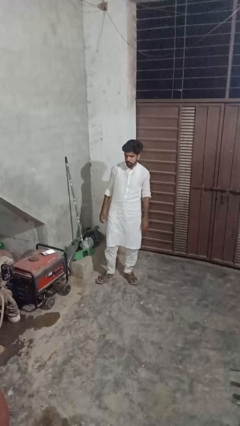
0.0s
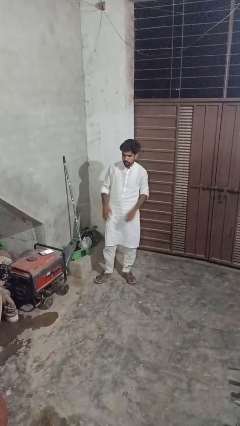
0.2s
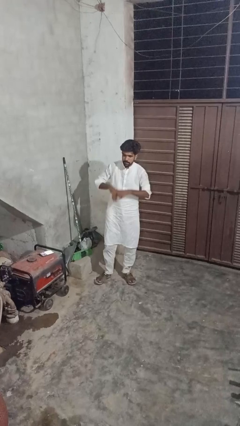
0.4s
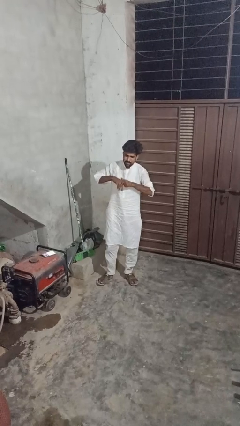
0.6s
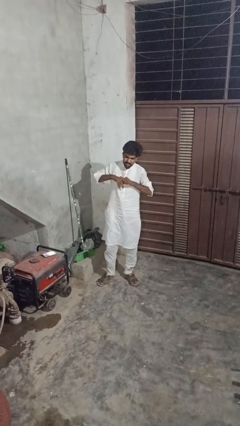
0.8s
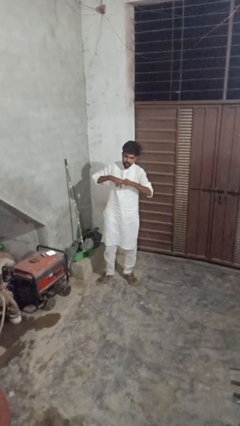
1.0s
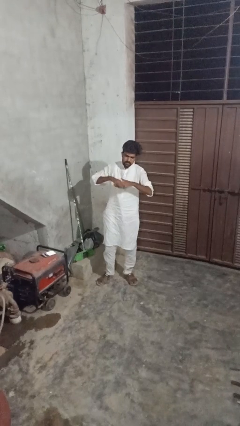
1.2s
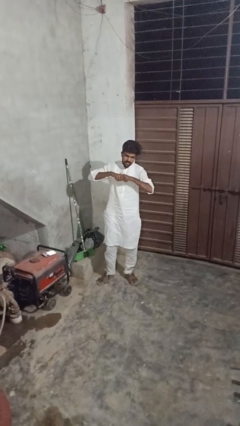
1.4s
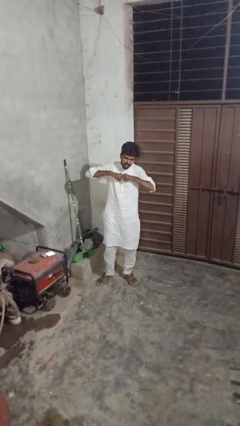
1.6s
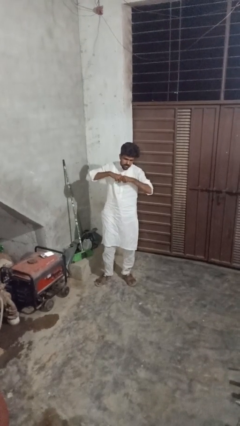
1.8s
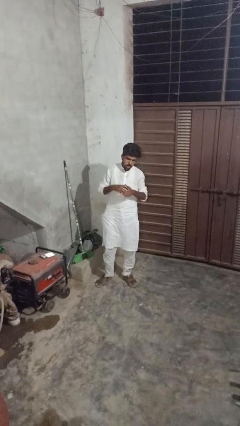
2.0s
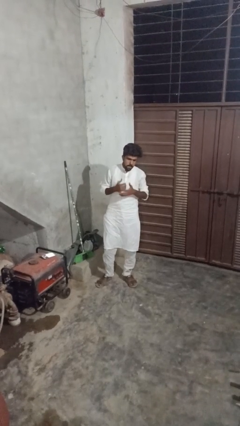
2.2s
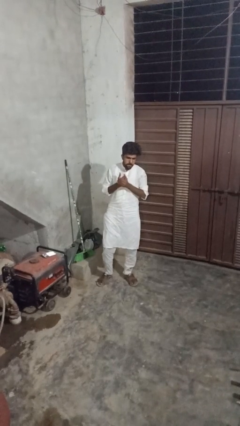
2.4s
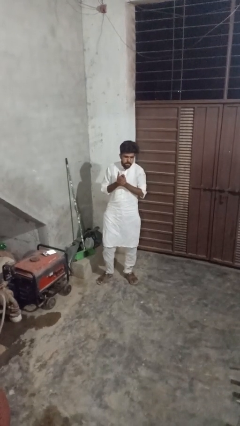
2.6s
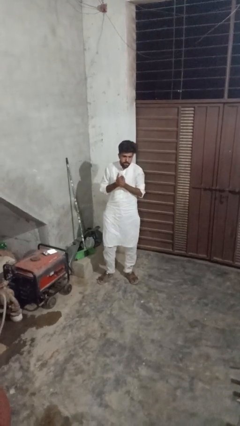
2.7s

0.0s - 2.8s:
person cracks knuckles

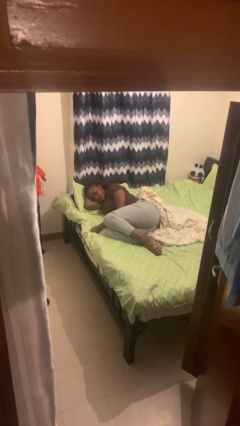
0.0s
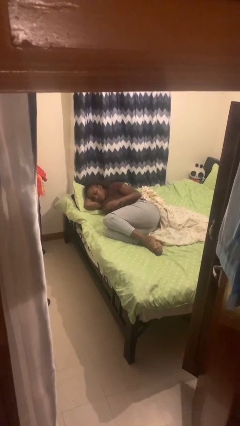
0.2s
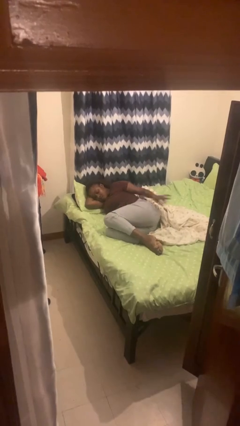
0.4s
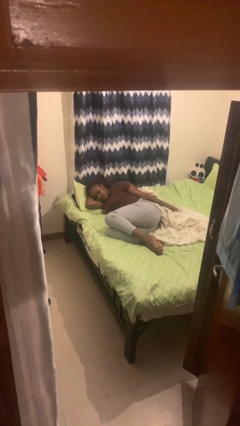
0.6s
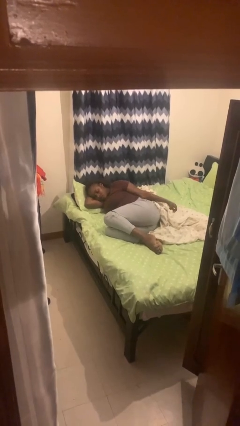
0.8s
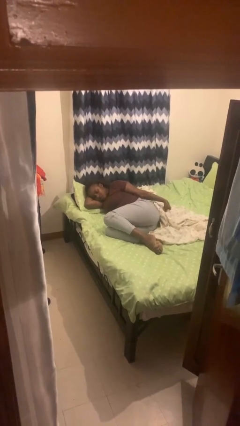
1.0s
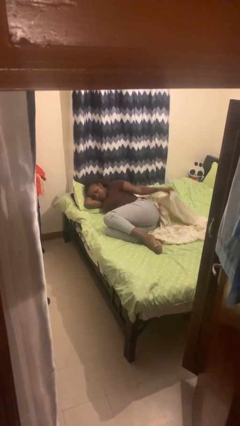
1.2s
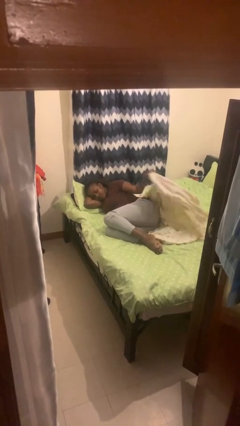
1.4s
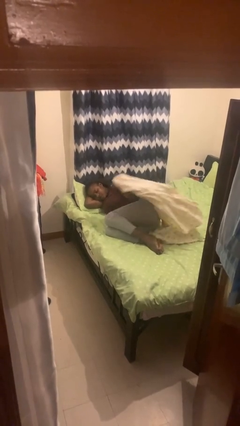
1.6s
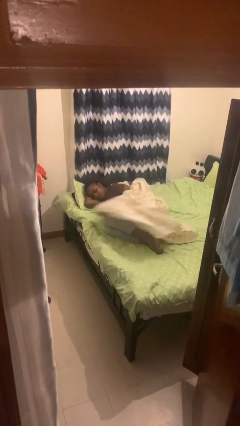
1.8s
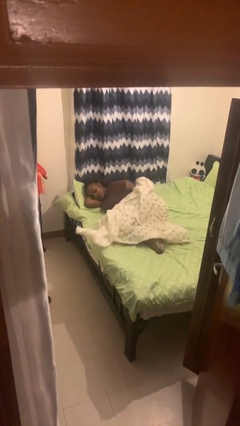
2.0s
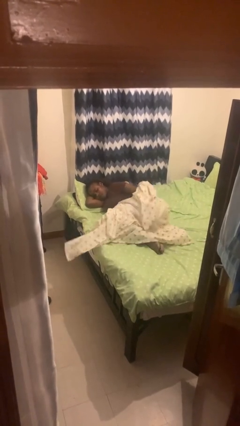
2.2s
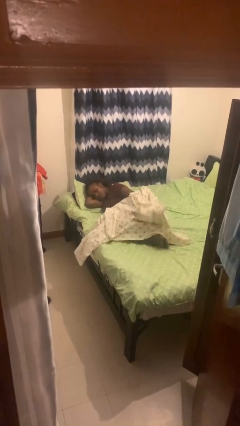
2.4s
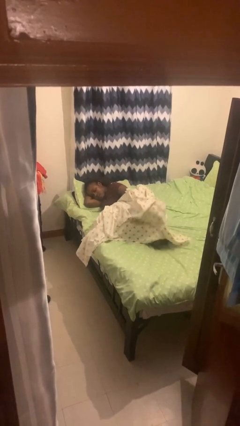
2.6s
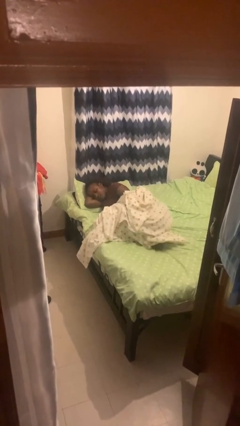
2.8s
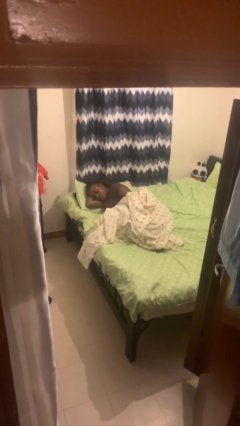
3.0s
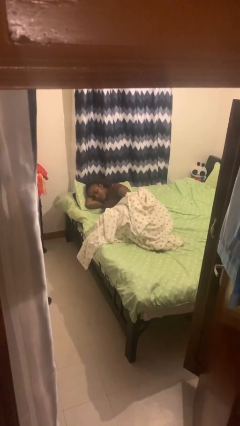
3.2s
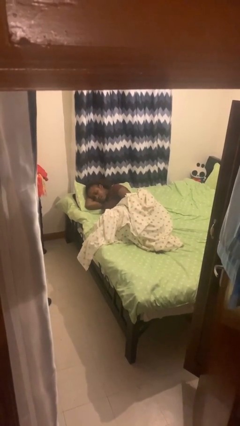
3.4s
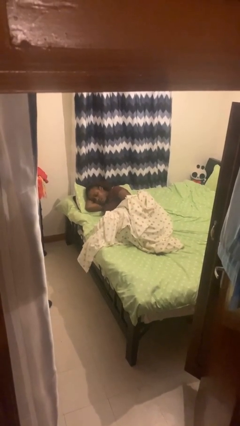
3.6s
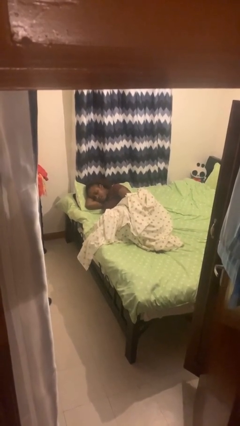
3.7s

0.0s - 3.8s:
person covers with bedsheets

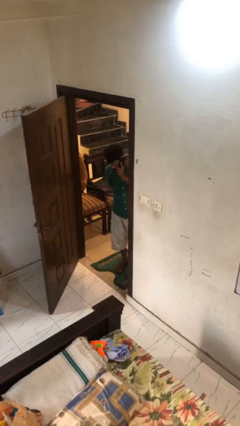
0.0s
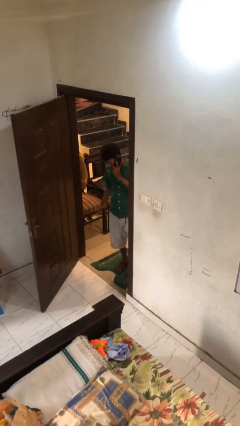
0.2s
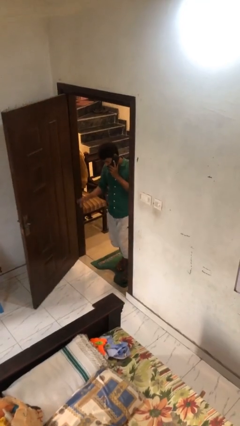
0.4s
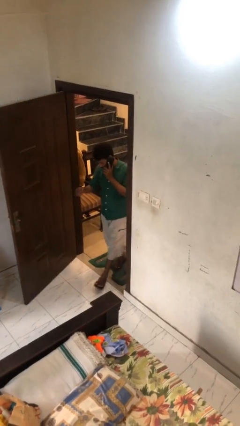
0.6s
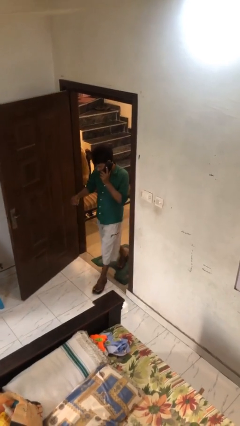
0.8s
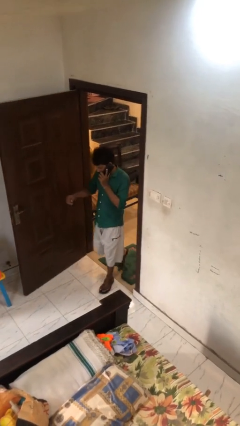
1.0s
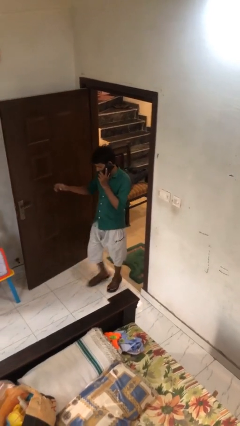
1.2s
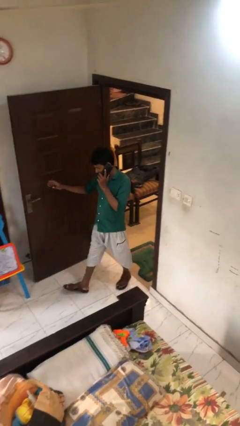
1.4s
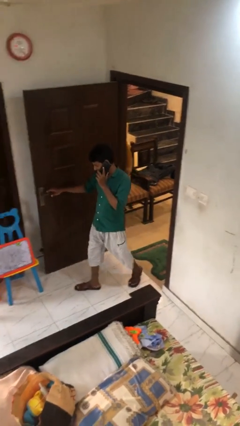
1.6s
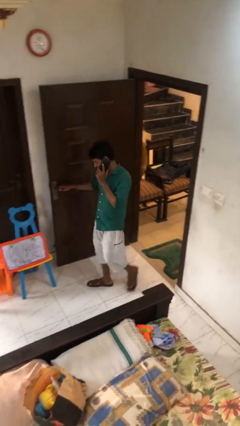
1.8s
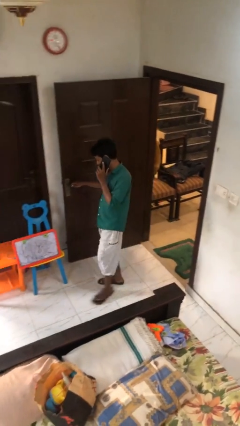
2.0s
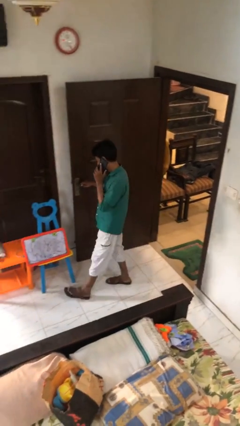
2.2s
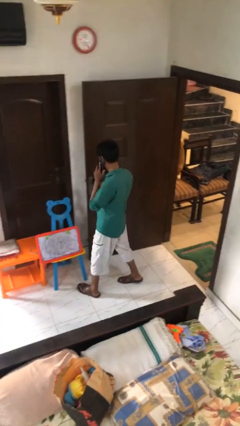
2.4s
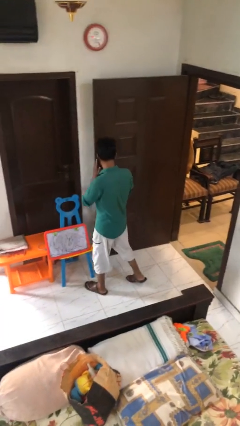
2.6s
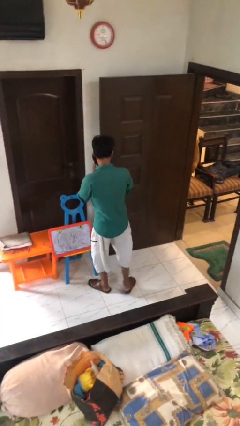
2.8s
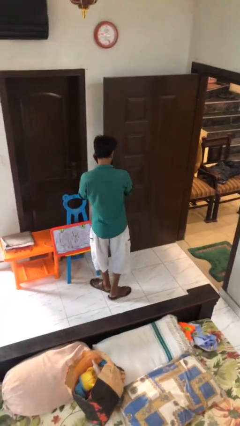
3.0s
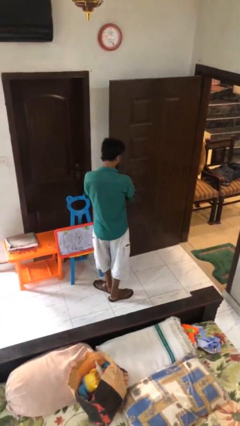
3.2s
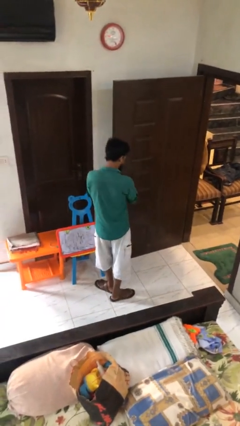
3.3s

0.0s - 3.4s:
person enters scene through structure

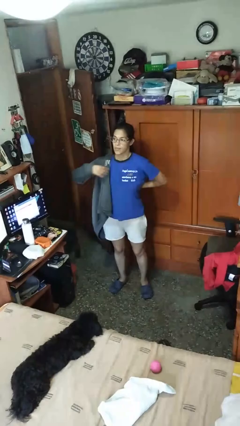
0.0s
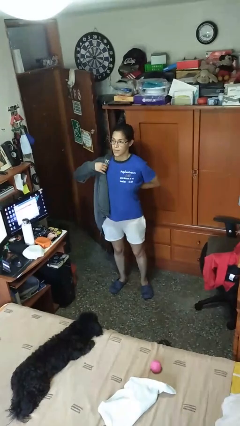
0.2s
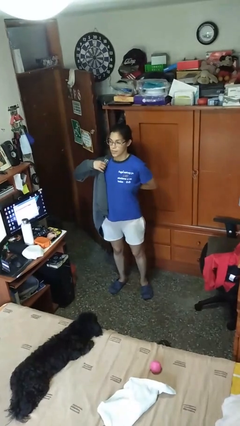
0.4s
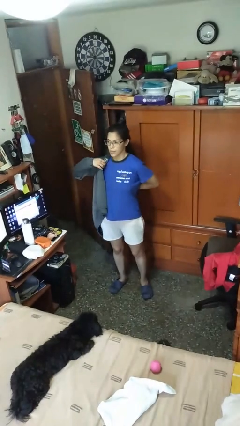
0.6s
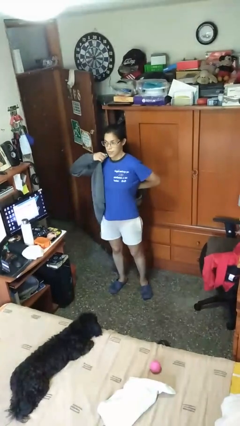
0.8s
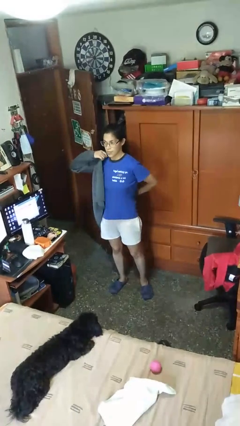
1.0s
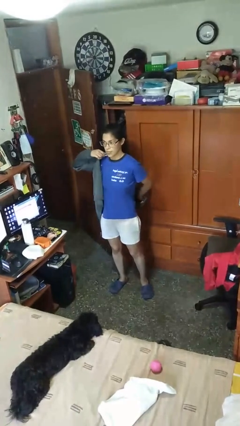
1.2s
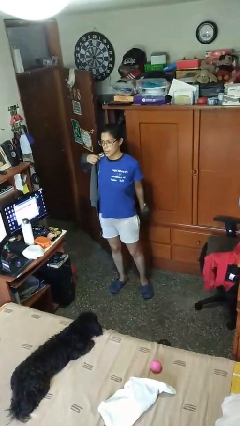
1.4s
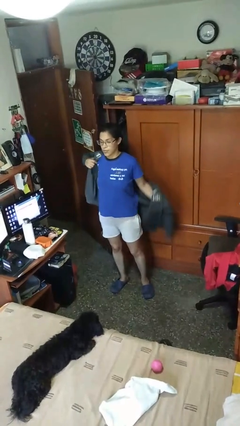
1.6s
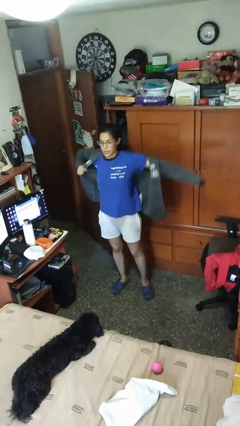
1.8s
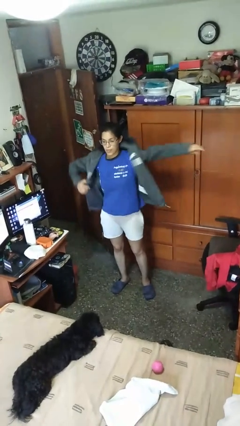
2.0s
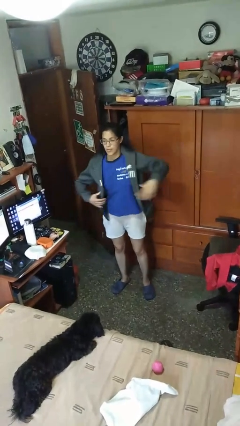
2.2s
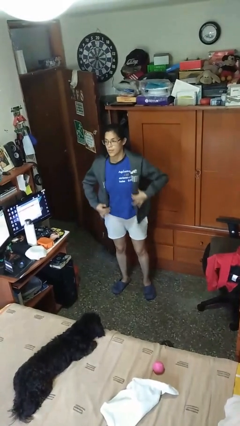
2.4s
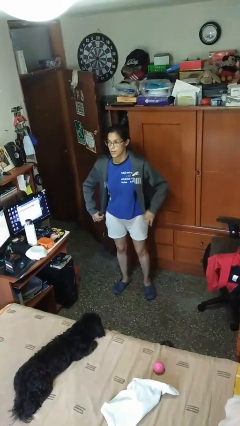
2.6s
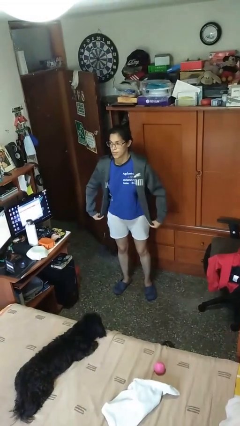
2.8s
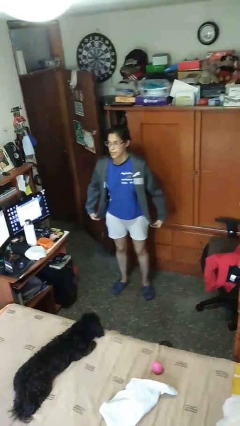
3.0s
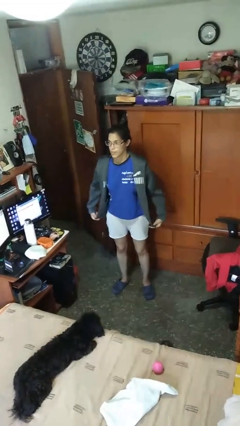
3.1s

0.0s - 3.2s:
person puts on jacket

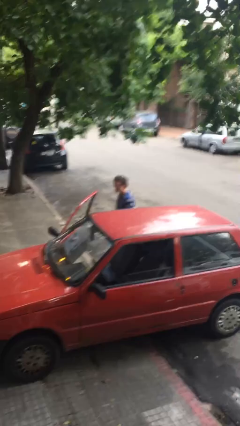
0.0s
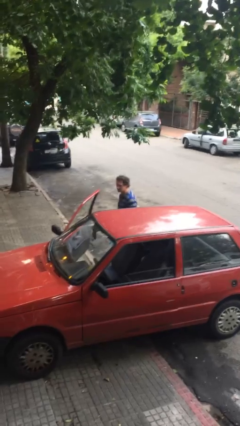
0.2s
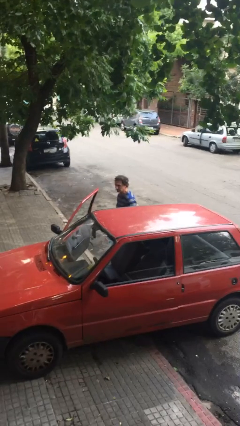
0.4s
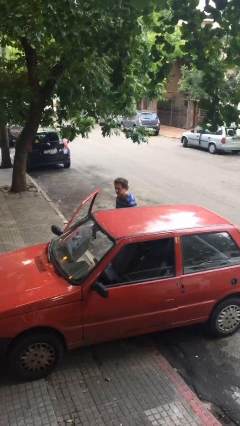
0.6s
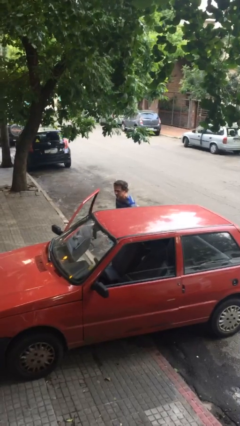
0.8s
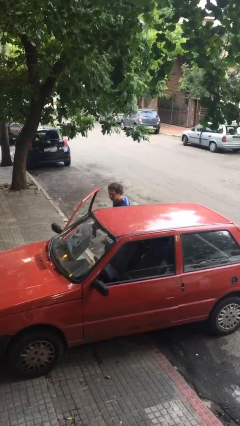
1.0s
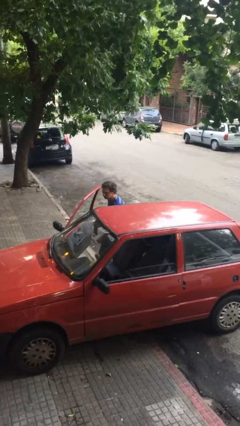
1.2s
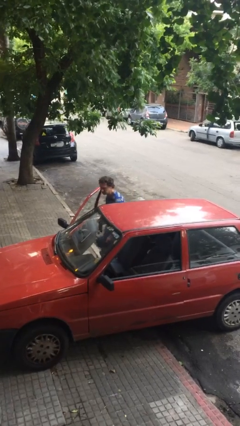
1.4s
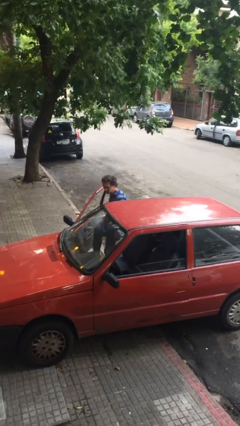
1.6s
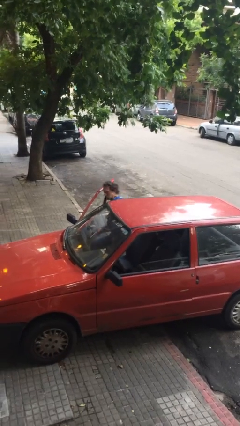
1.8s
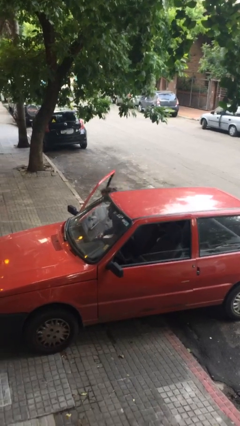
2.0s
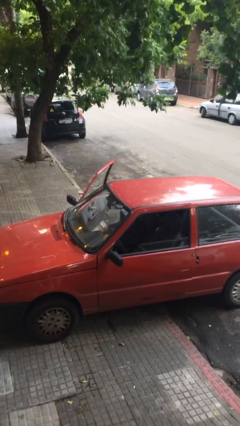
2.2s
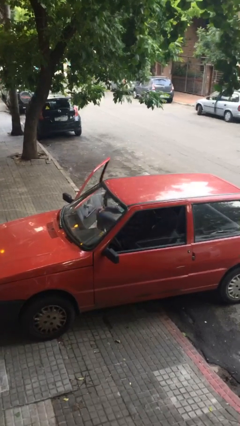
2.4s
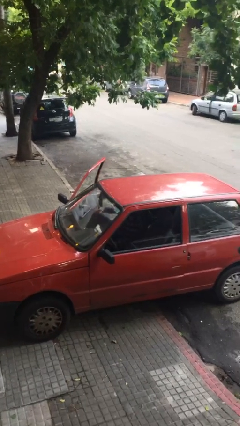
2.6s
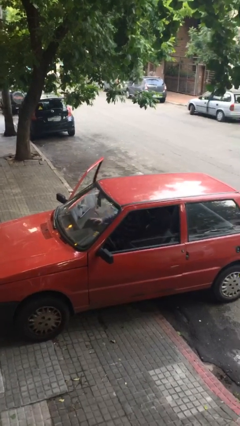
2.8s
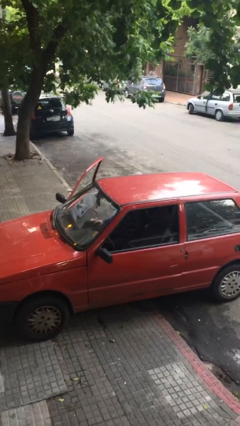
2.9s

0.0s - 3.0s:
person enters car

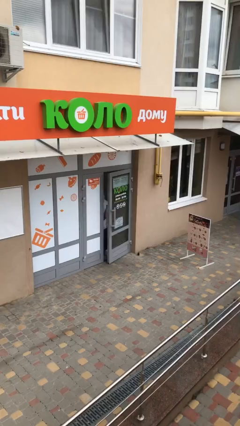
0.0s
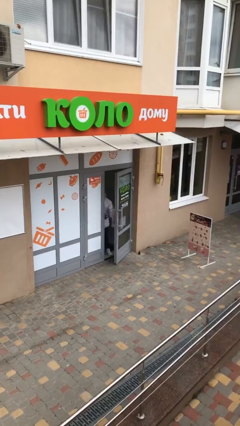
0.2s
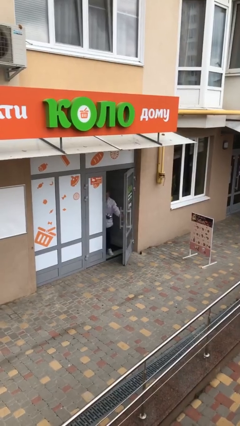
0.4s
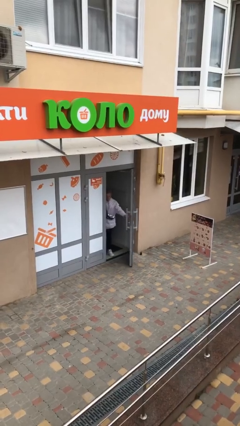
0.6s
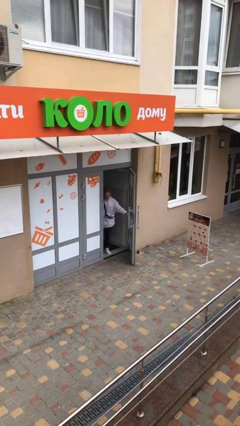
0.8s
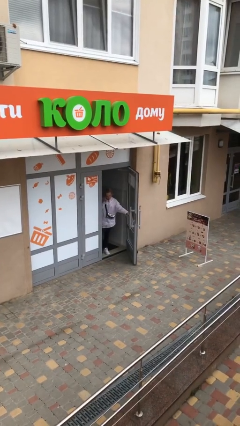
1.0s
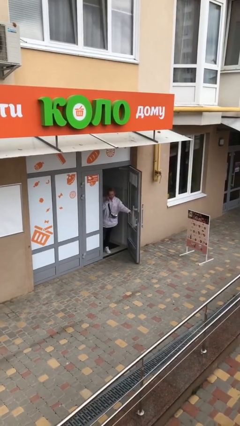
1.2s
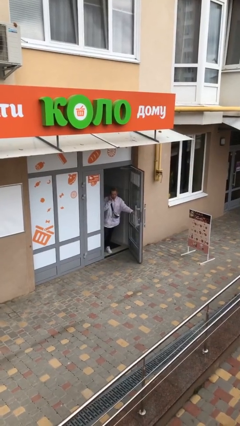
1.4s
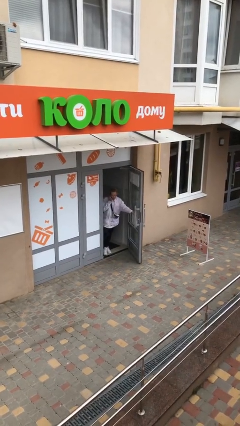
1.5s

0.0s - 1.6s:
person opens facility door
